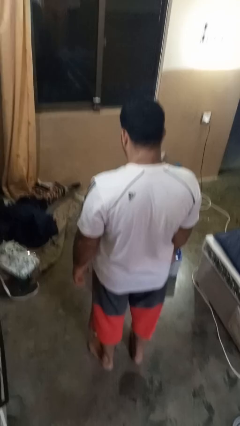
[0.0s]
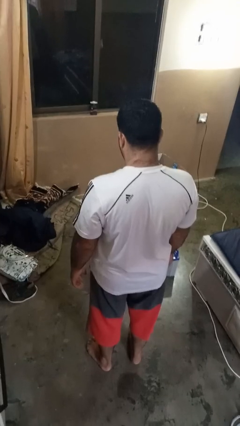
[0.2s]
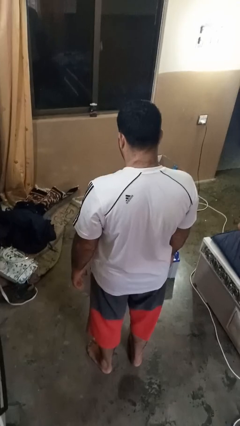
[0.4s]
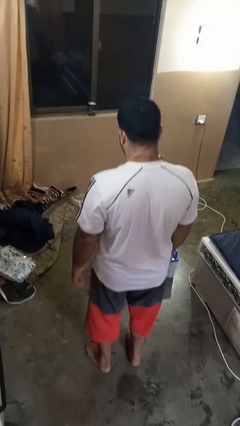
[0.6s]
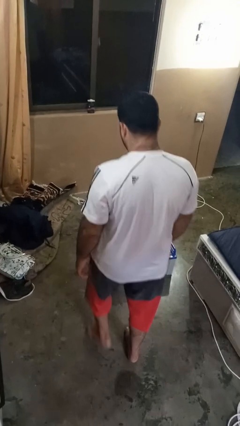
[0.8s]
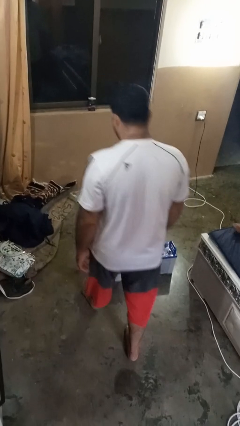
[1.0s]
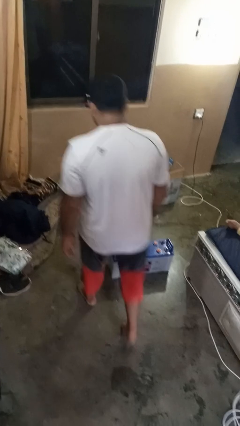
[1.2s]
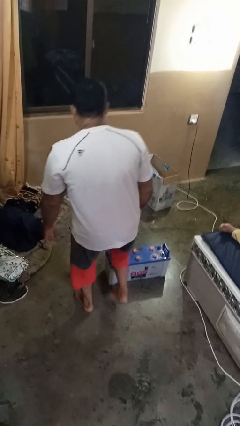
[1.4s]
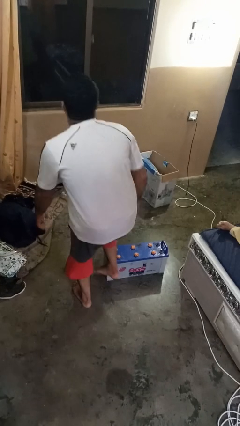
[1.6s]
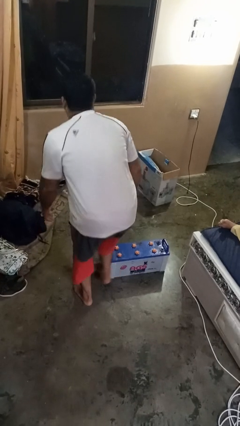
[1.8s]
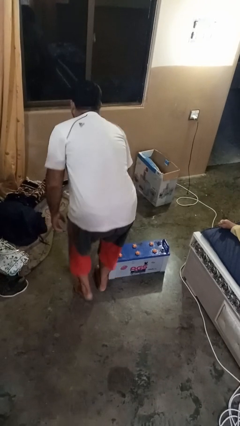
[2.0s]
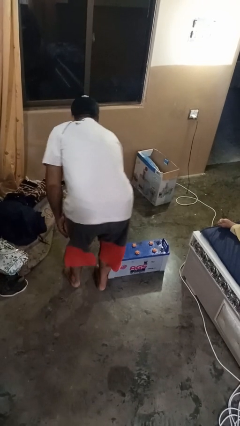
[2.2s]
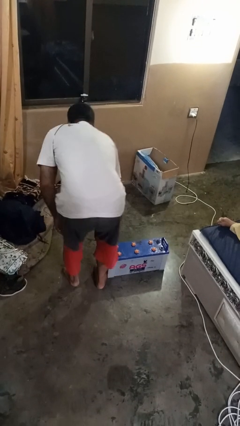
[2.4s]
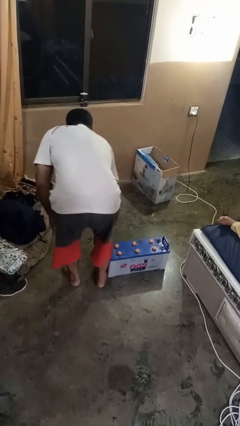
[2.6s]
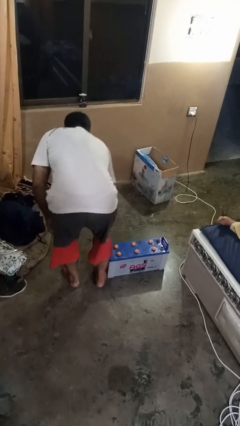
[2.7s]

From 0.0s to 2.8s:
person trips on object on floor

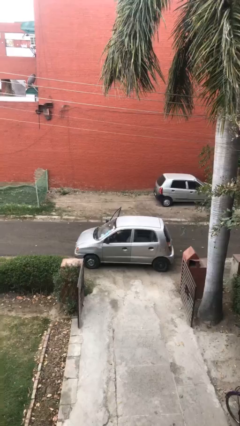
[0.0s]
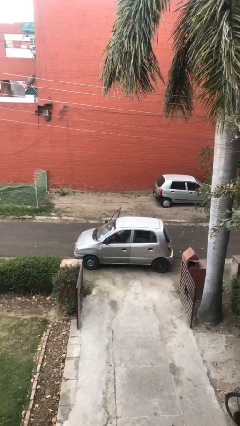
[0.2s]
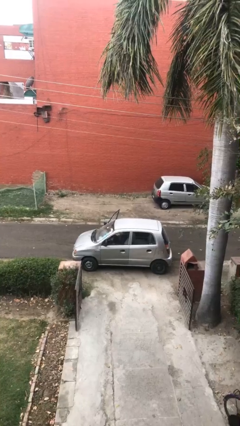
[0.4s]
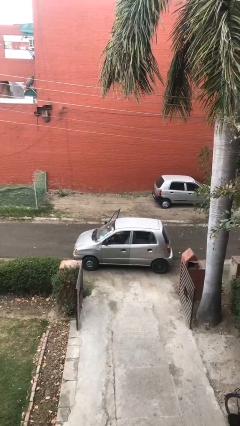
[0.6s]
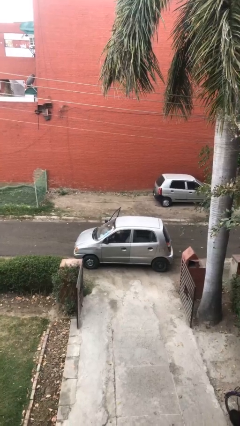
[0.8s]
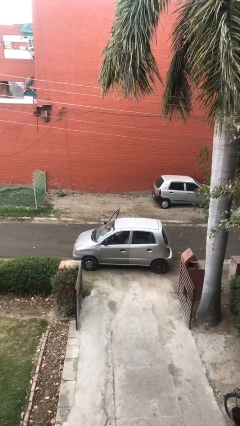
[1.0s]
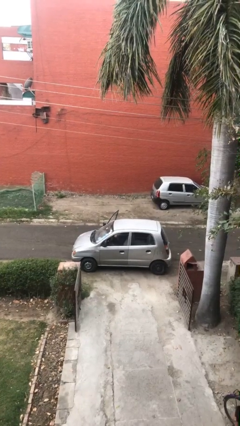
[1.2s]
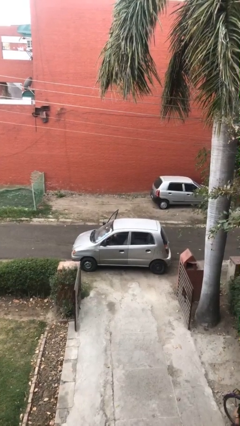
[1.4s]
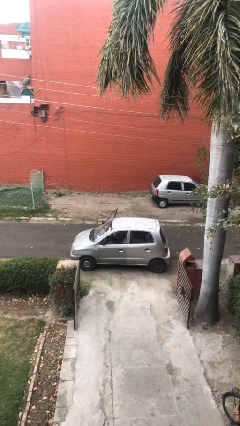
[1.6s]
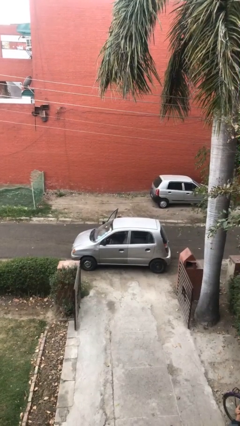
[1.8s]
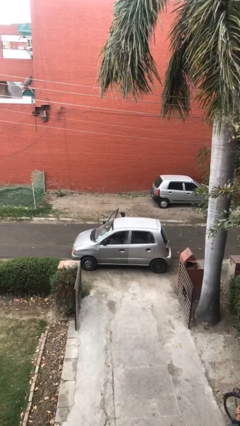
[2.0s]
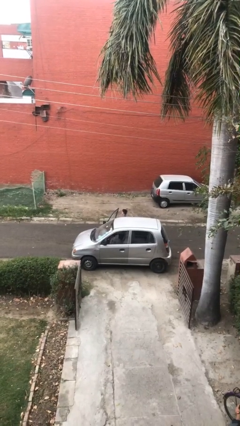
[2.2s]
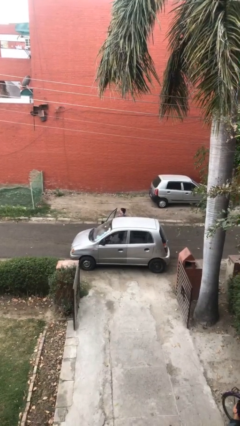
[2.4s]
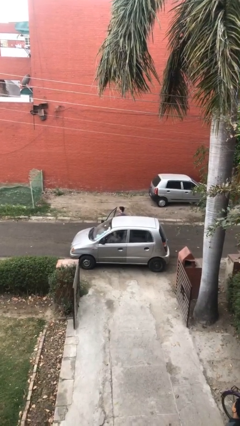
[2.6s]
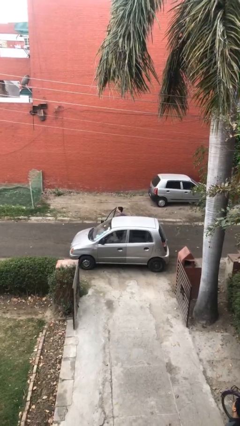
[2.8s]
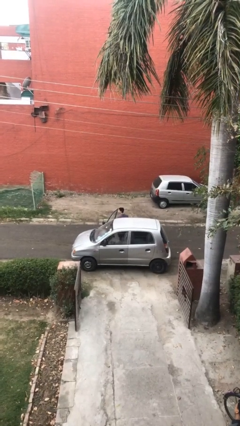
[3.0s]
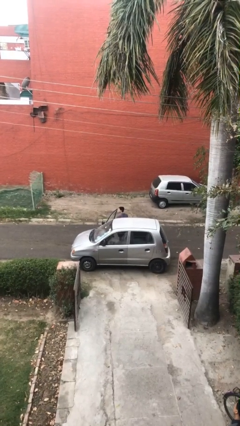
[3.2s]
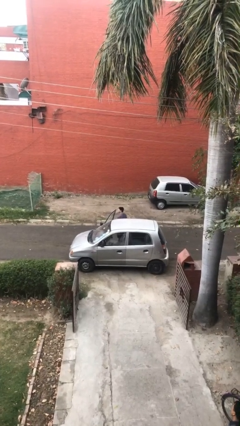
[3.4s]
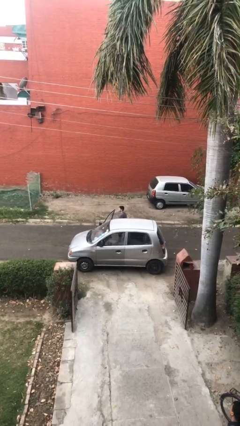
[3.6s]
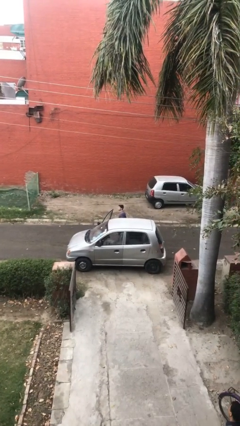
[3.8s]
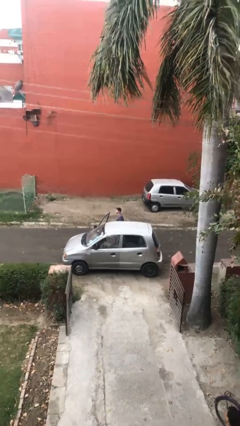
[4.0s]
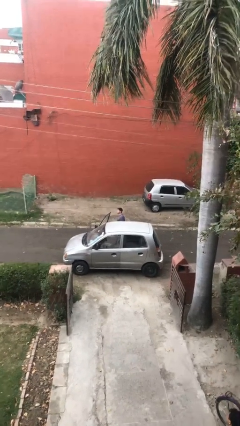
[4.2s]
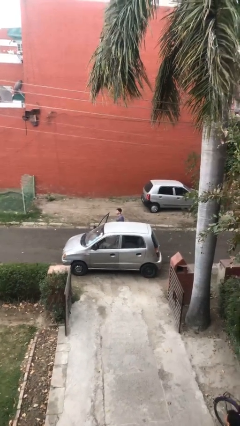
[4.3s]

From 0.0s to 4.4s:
person exits car

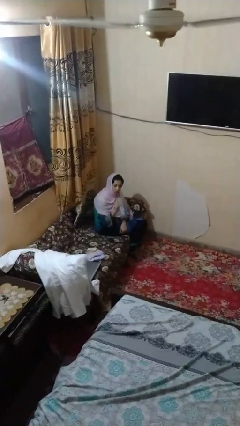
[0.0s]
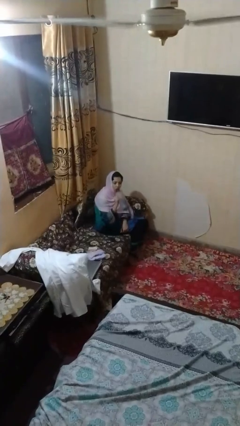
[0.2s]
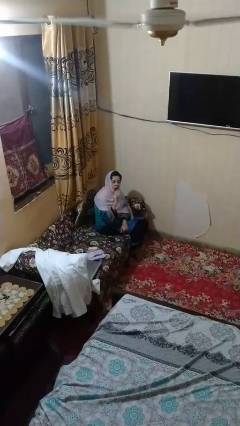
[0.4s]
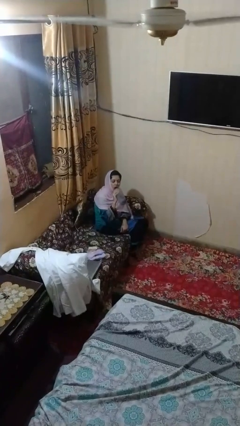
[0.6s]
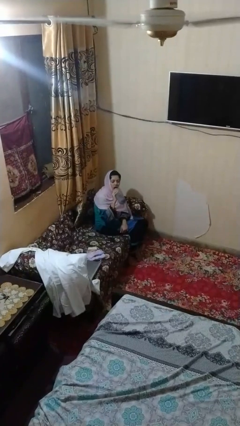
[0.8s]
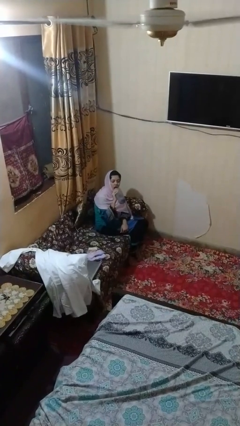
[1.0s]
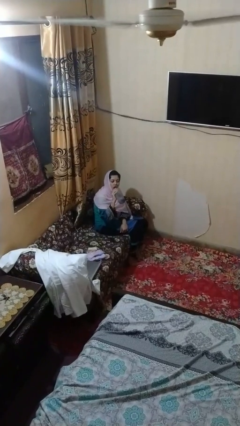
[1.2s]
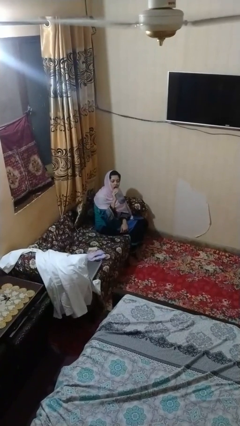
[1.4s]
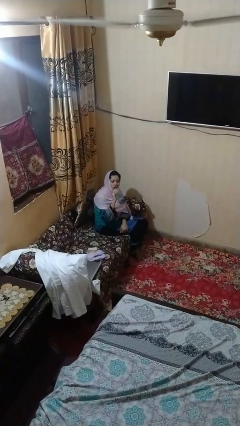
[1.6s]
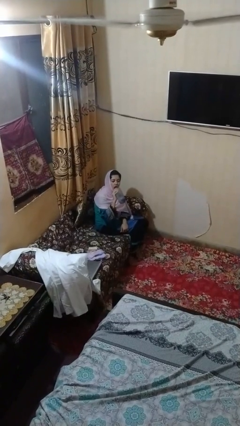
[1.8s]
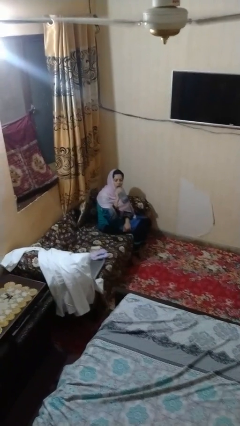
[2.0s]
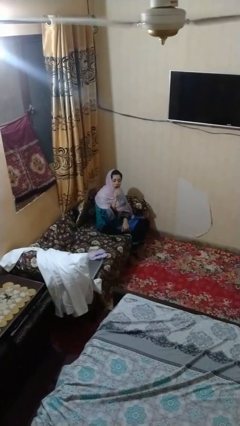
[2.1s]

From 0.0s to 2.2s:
person drinks from bottle

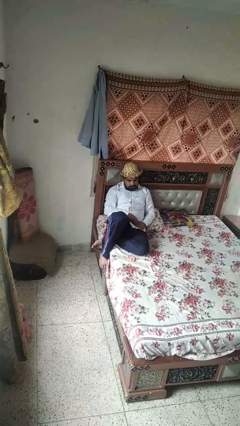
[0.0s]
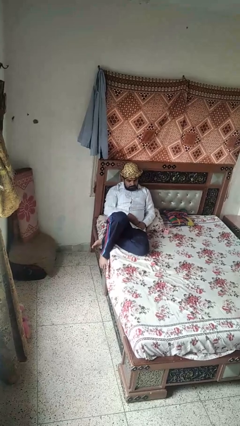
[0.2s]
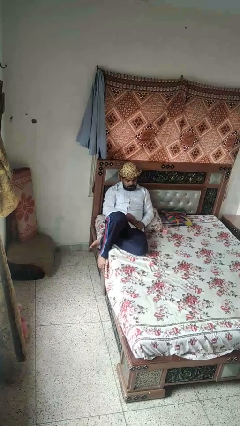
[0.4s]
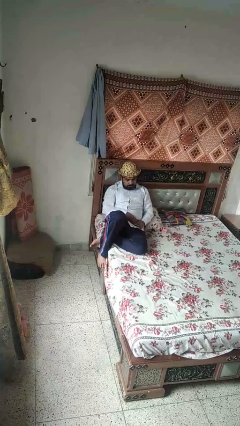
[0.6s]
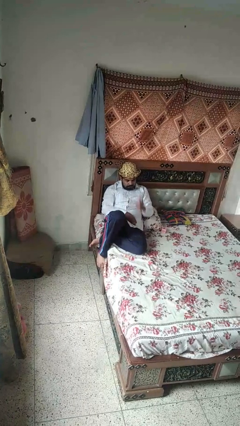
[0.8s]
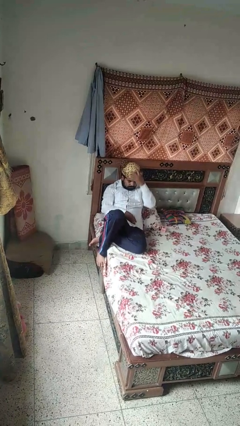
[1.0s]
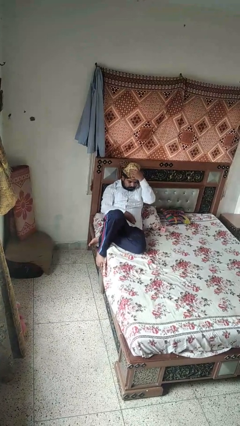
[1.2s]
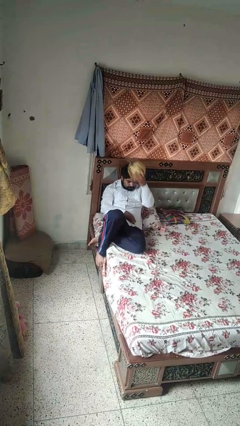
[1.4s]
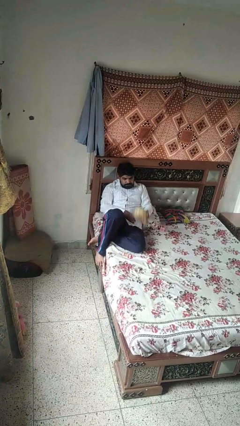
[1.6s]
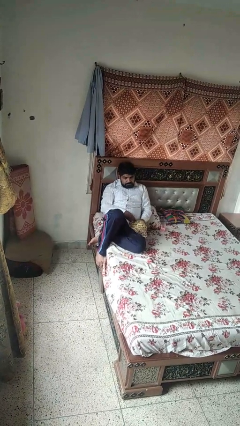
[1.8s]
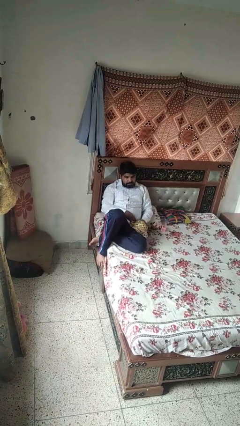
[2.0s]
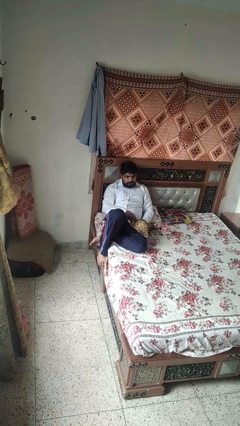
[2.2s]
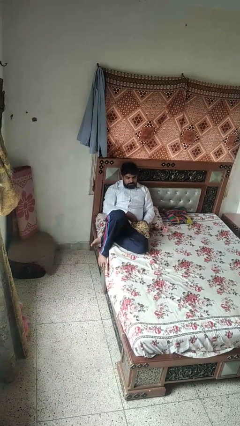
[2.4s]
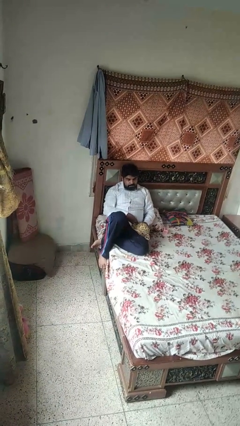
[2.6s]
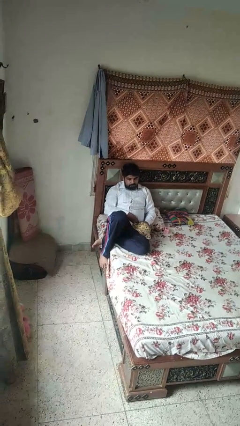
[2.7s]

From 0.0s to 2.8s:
person takes off hat

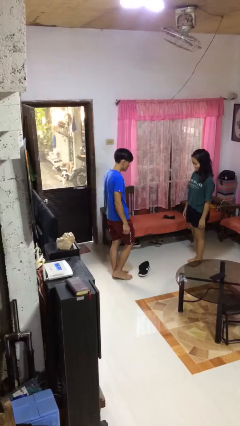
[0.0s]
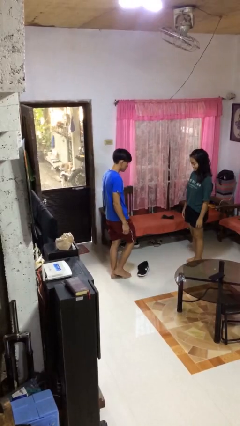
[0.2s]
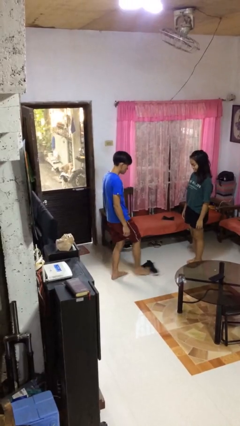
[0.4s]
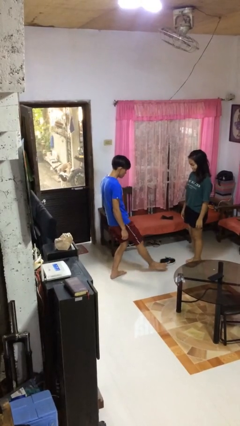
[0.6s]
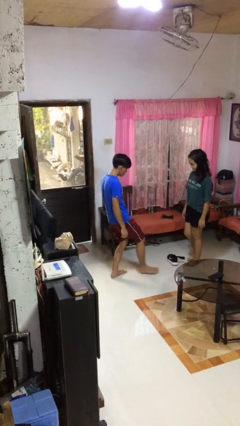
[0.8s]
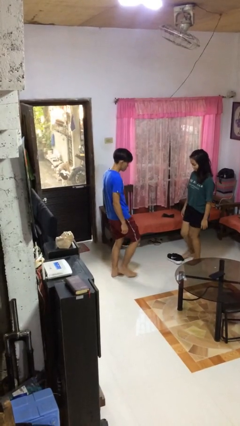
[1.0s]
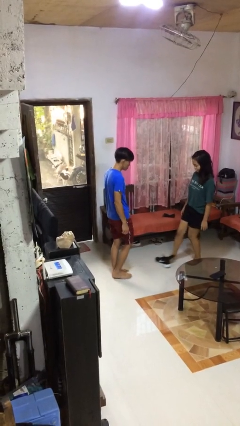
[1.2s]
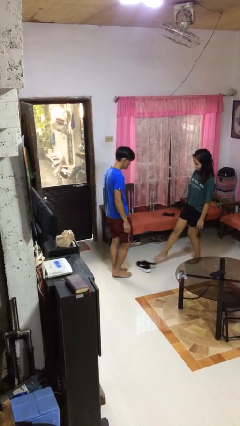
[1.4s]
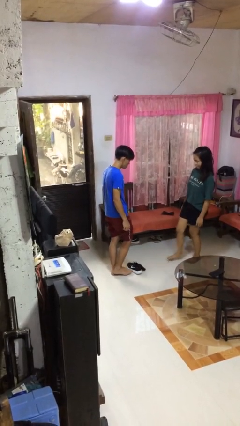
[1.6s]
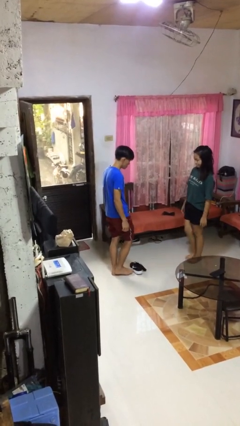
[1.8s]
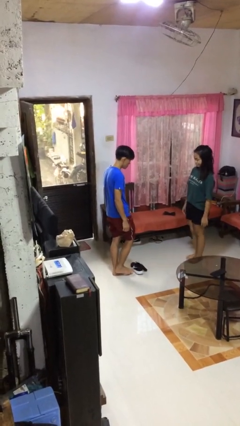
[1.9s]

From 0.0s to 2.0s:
person kicks object to person

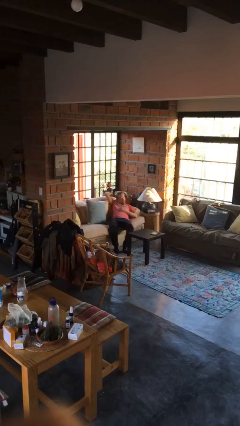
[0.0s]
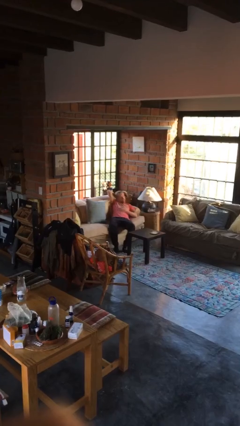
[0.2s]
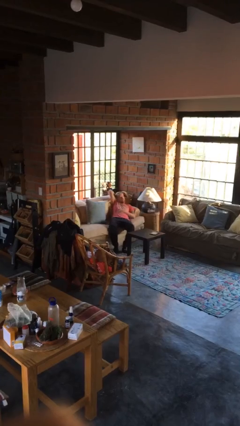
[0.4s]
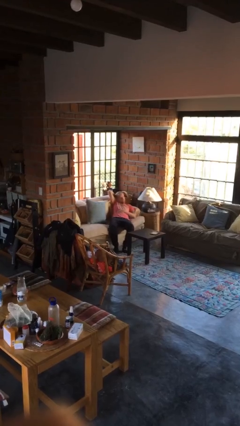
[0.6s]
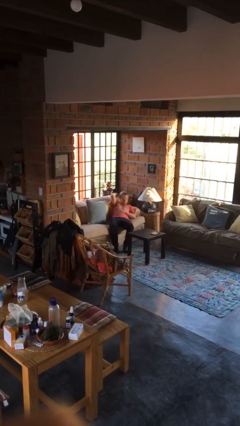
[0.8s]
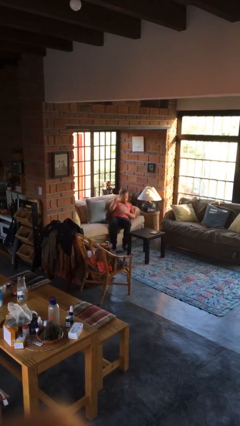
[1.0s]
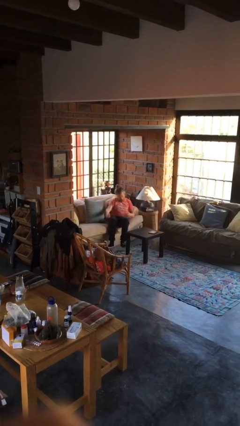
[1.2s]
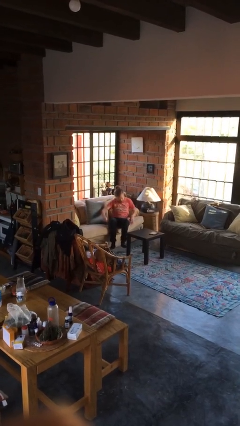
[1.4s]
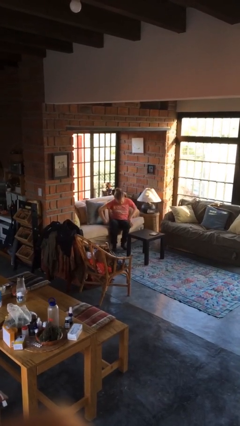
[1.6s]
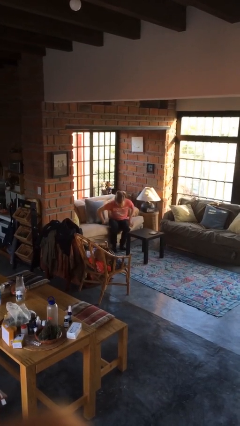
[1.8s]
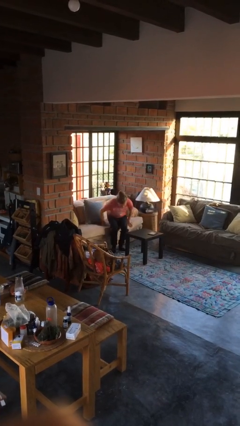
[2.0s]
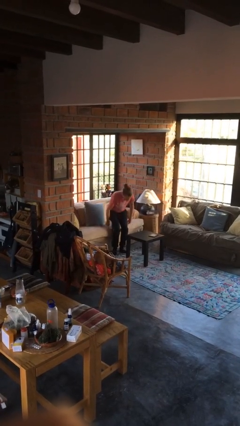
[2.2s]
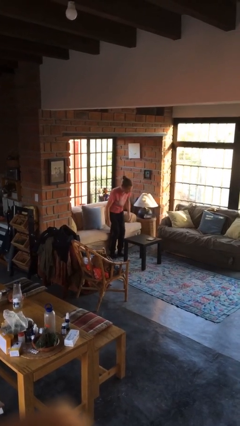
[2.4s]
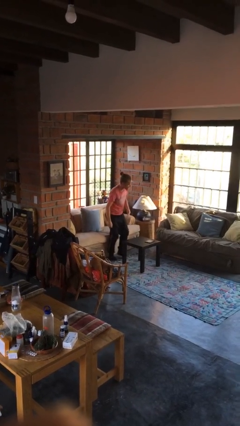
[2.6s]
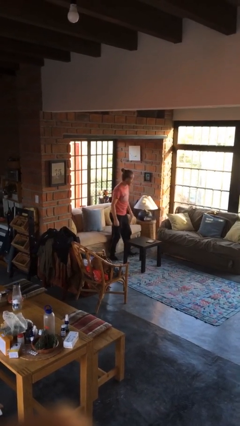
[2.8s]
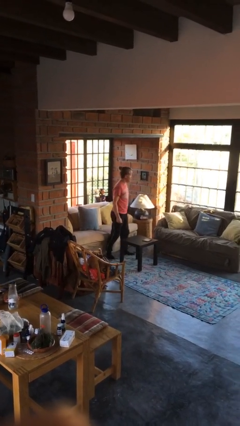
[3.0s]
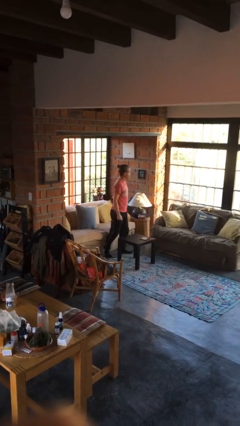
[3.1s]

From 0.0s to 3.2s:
person stands up
